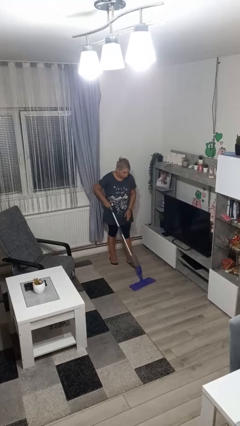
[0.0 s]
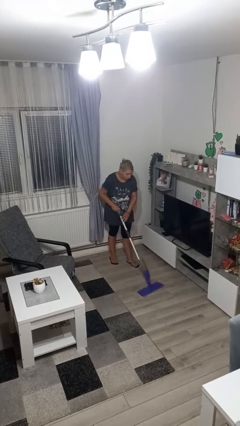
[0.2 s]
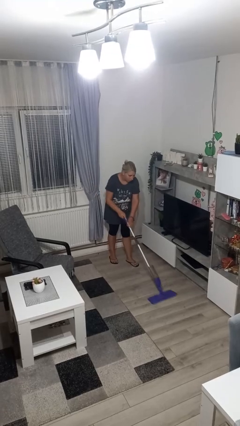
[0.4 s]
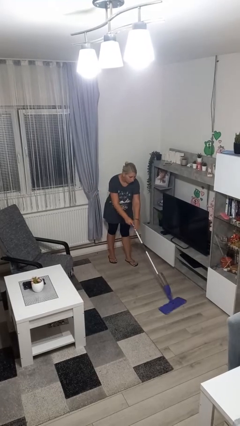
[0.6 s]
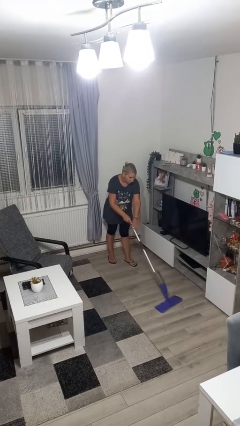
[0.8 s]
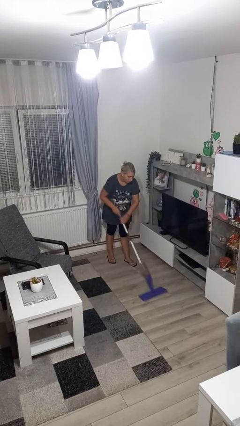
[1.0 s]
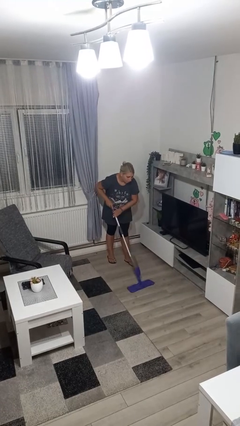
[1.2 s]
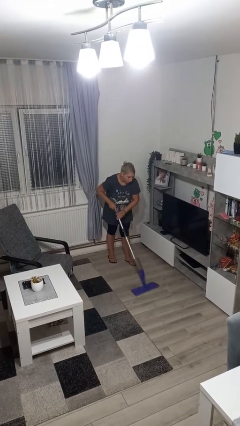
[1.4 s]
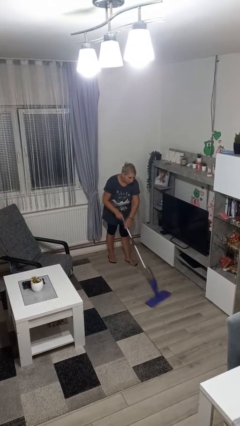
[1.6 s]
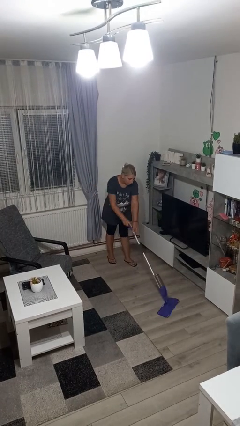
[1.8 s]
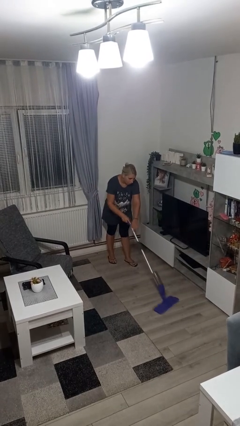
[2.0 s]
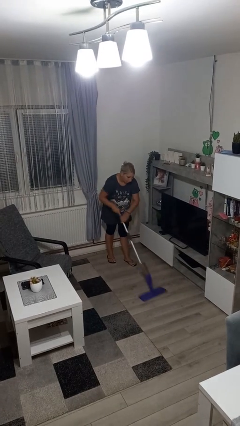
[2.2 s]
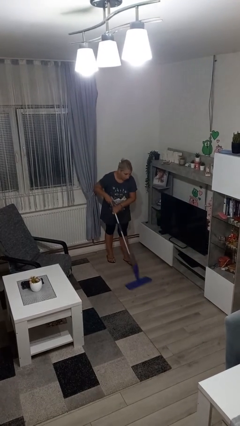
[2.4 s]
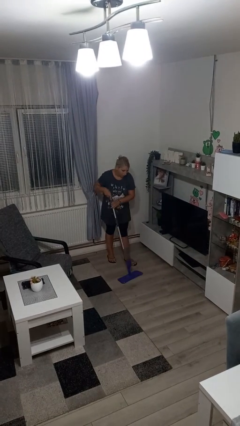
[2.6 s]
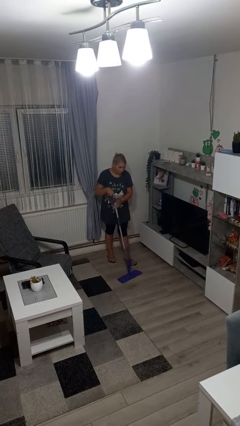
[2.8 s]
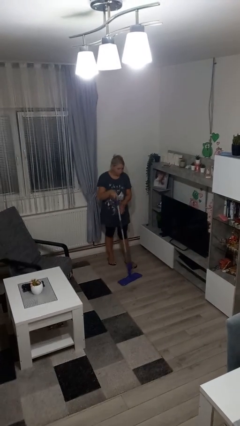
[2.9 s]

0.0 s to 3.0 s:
person mops

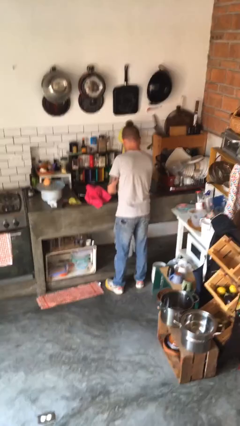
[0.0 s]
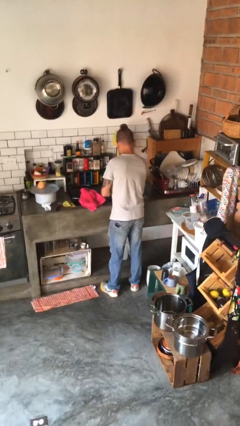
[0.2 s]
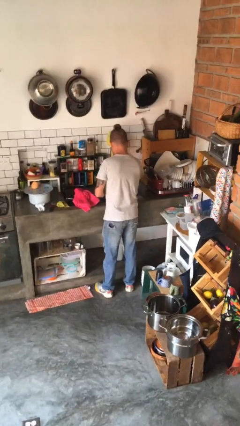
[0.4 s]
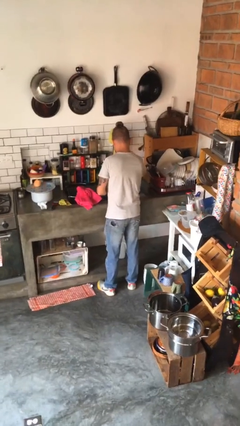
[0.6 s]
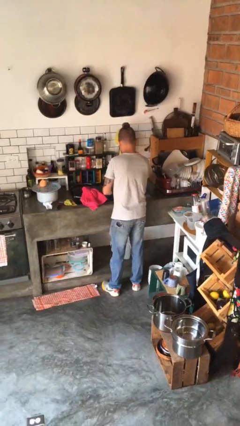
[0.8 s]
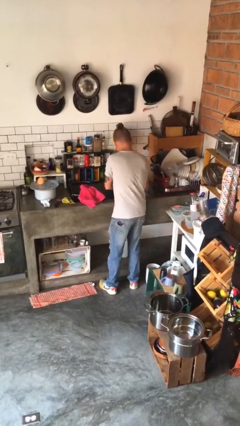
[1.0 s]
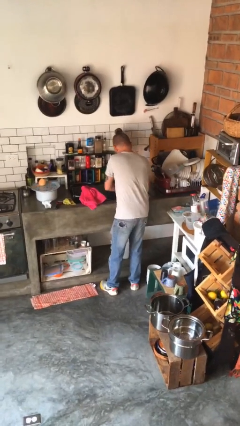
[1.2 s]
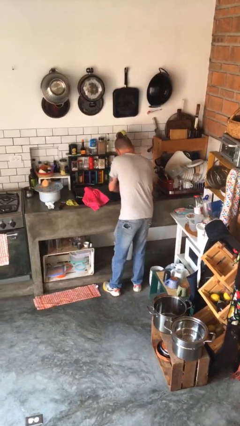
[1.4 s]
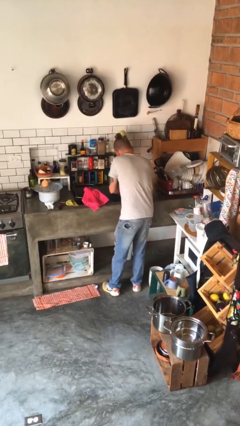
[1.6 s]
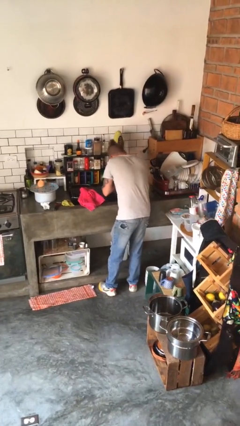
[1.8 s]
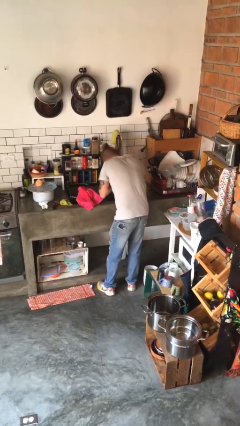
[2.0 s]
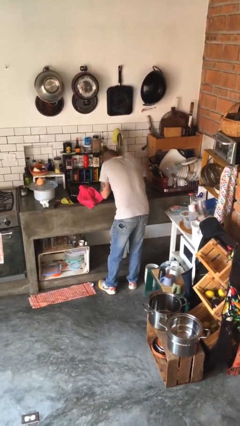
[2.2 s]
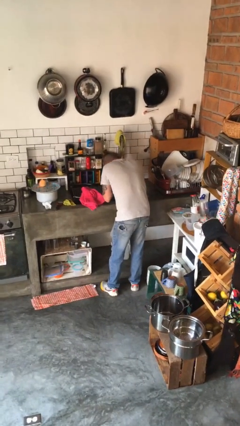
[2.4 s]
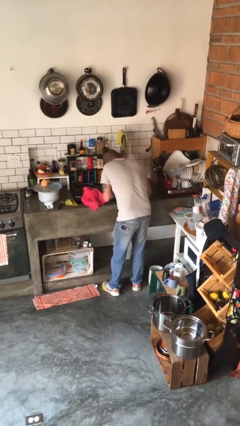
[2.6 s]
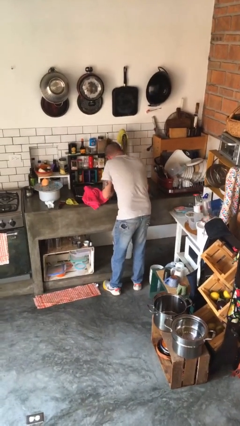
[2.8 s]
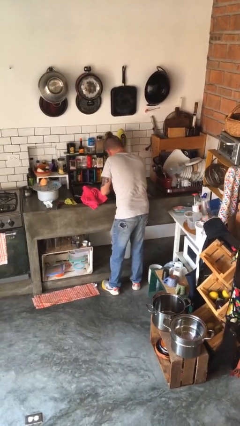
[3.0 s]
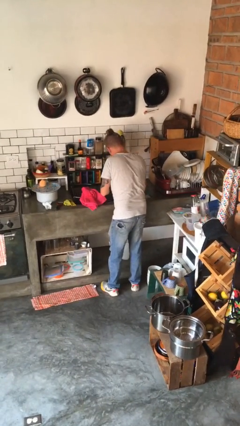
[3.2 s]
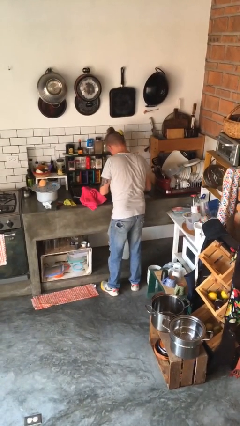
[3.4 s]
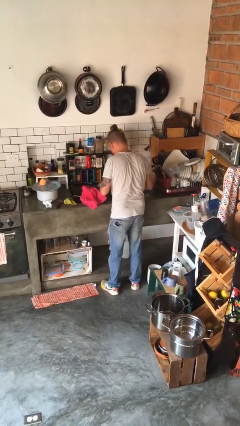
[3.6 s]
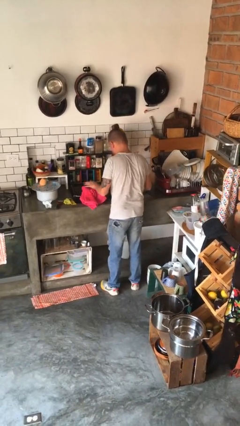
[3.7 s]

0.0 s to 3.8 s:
person washes face

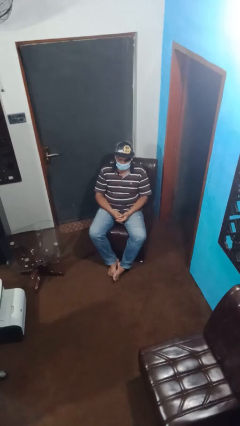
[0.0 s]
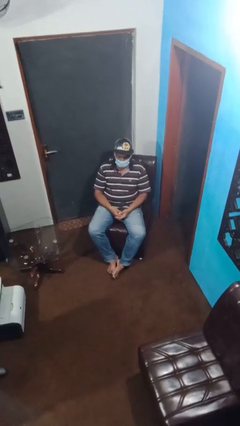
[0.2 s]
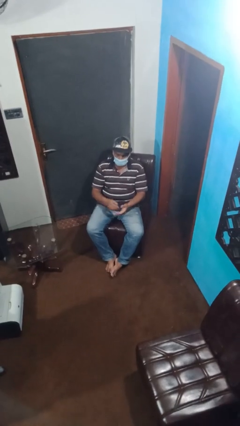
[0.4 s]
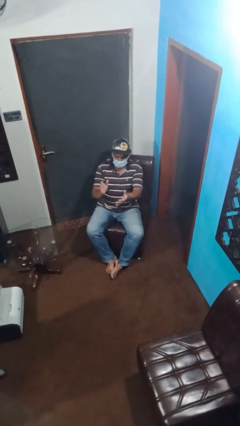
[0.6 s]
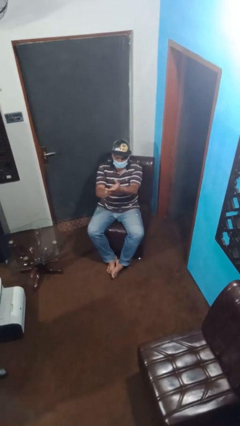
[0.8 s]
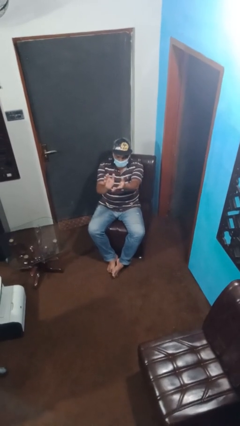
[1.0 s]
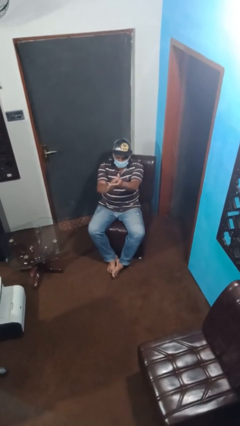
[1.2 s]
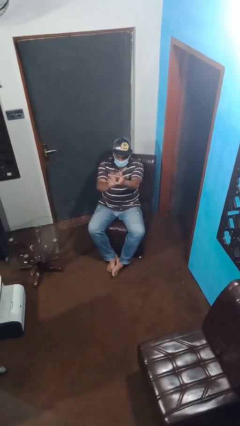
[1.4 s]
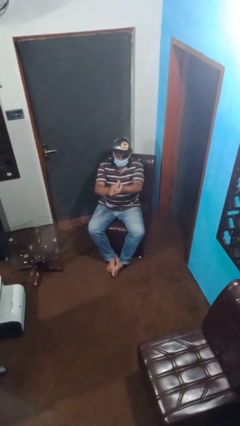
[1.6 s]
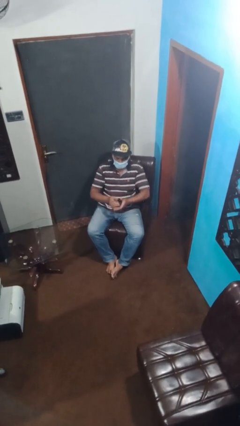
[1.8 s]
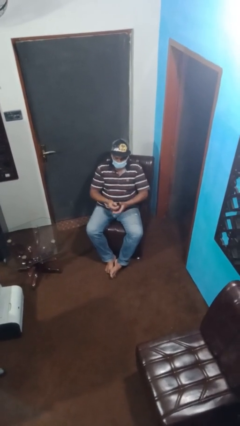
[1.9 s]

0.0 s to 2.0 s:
person claps hands

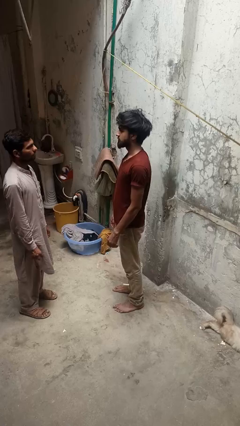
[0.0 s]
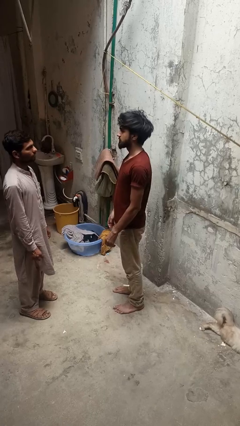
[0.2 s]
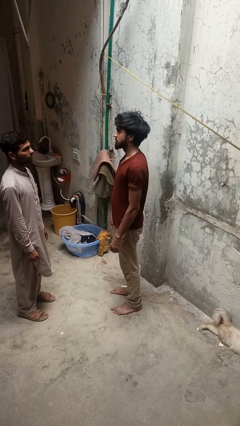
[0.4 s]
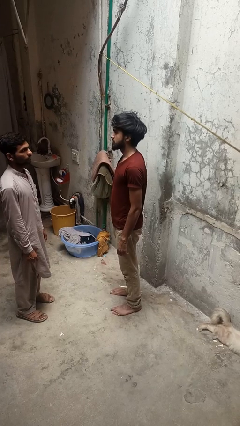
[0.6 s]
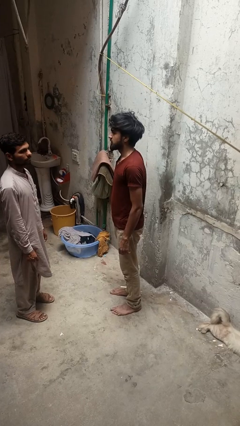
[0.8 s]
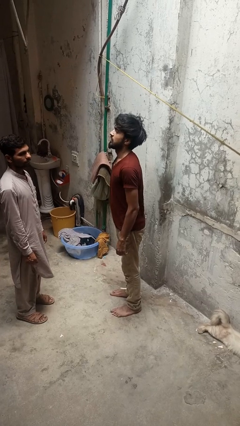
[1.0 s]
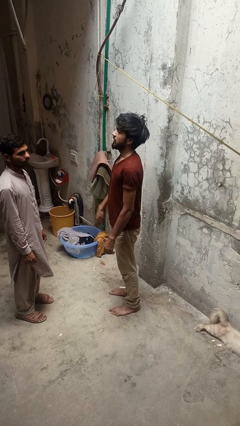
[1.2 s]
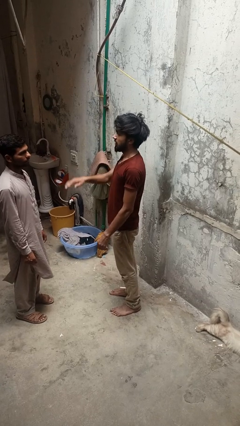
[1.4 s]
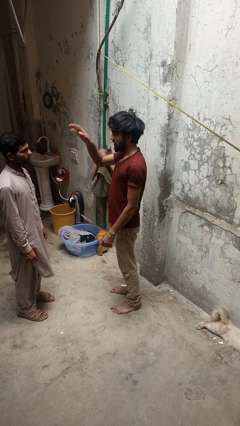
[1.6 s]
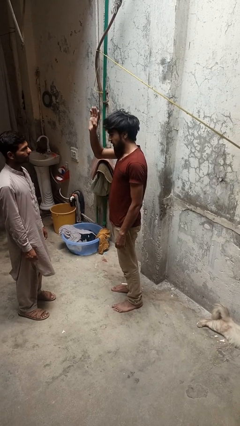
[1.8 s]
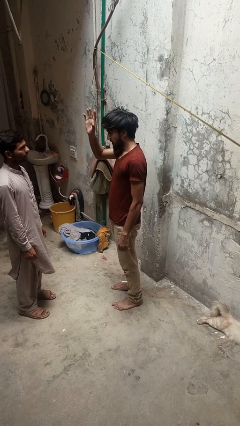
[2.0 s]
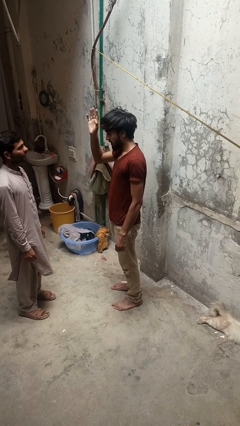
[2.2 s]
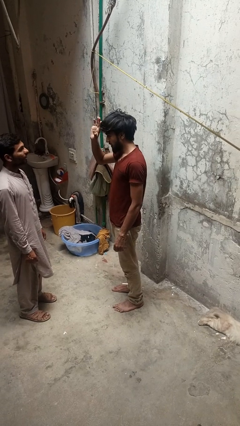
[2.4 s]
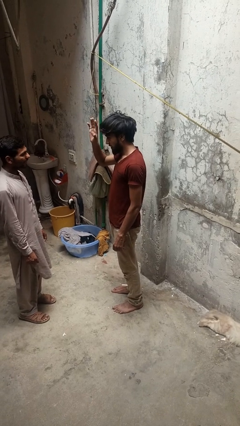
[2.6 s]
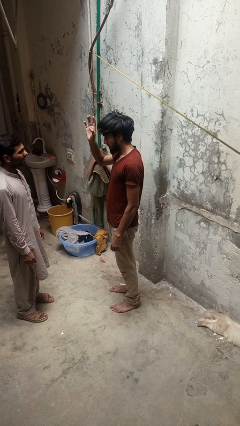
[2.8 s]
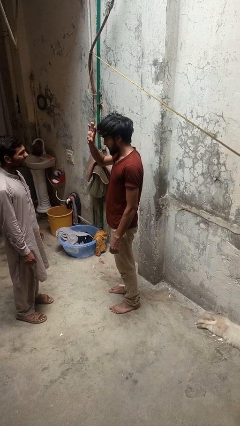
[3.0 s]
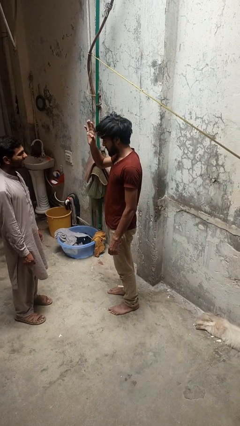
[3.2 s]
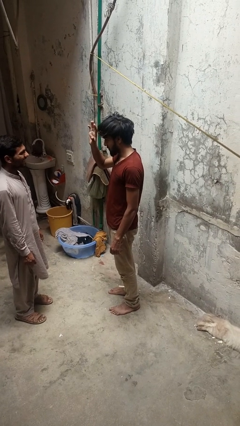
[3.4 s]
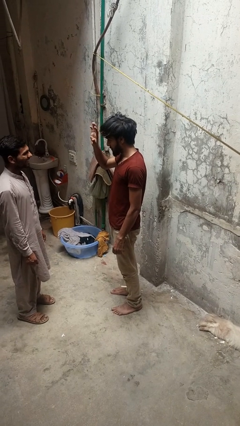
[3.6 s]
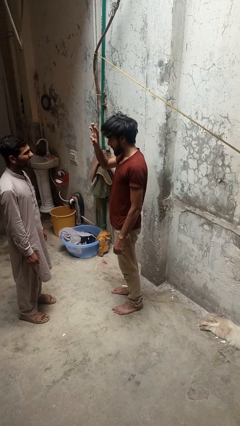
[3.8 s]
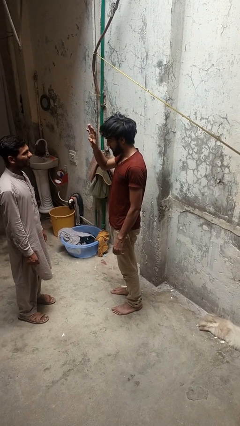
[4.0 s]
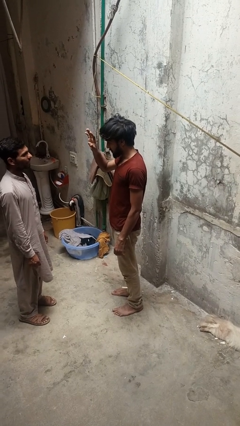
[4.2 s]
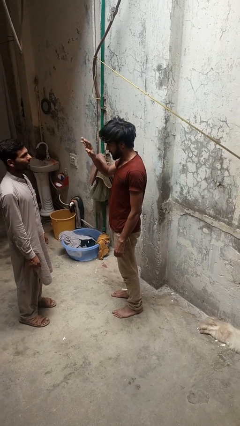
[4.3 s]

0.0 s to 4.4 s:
person waves at person

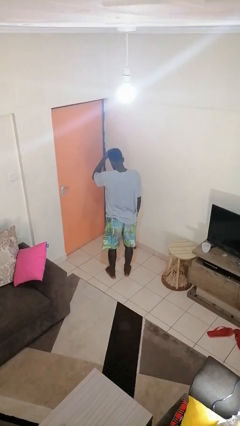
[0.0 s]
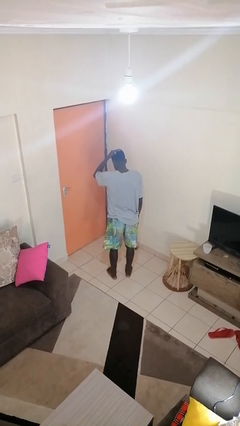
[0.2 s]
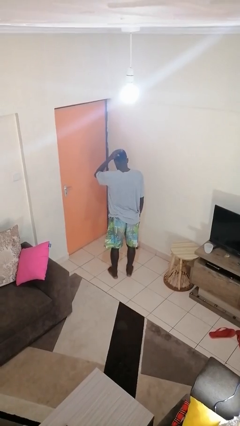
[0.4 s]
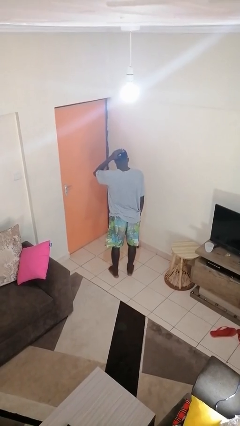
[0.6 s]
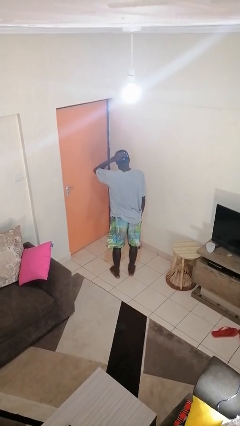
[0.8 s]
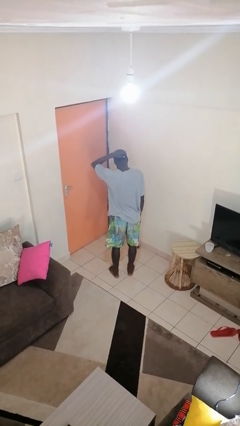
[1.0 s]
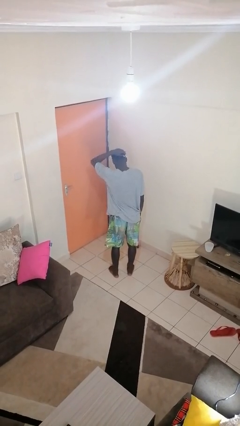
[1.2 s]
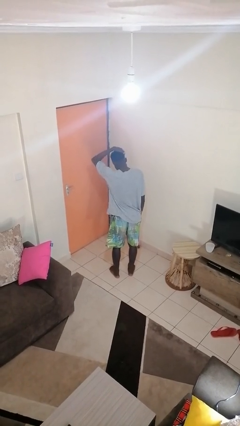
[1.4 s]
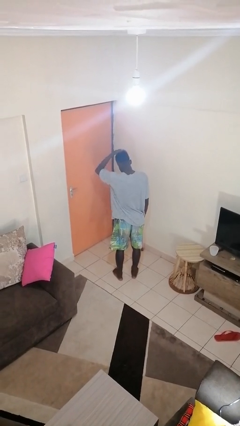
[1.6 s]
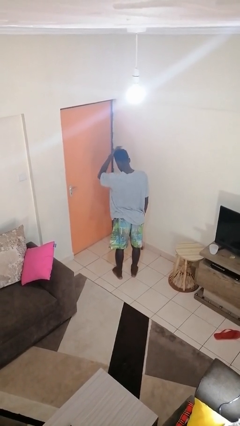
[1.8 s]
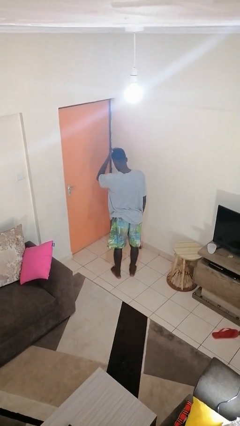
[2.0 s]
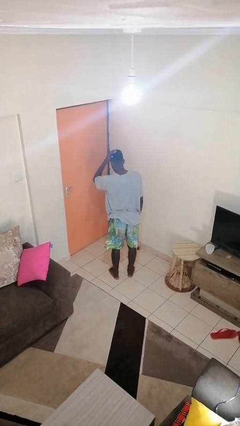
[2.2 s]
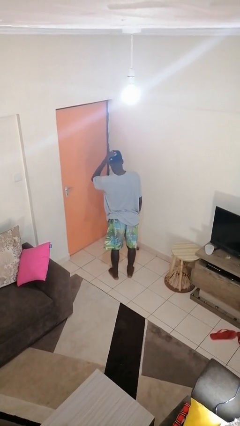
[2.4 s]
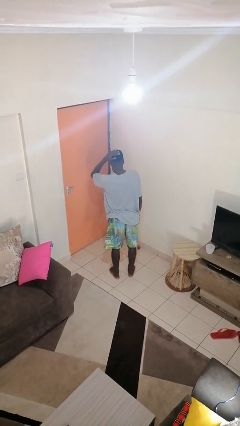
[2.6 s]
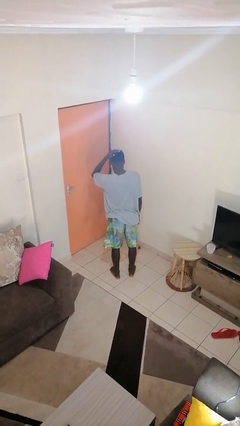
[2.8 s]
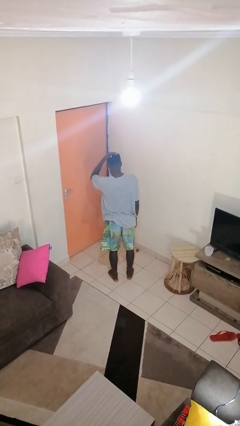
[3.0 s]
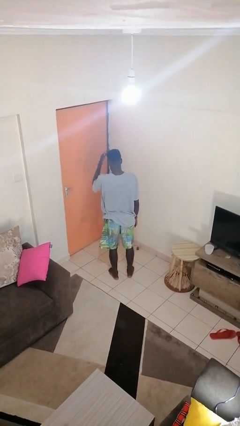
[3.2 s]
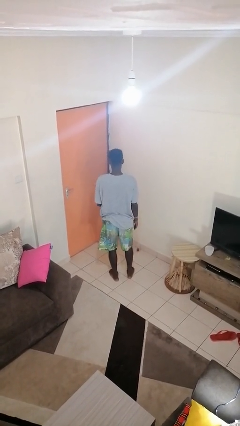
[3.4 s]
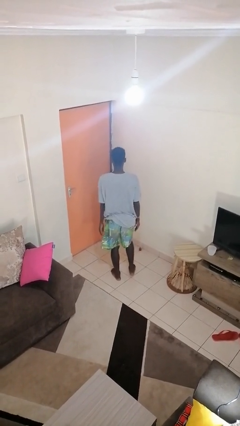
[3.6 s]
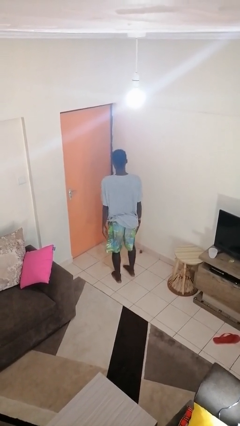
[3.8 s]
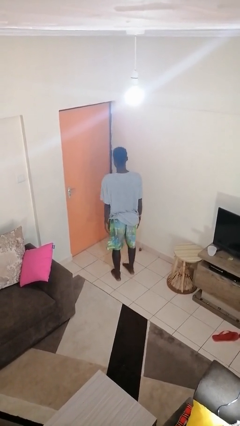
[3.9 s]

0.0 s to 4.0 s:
person pats head

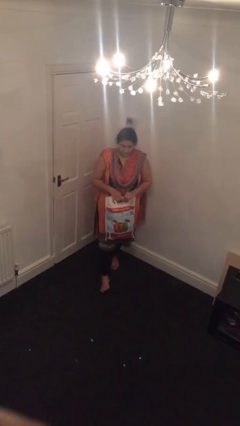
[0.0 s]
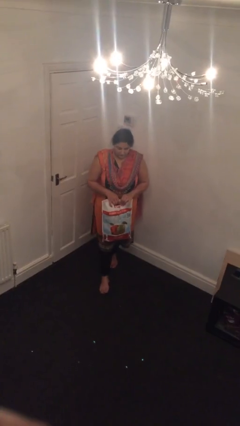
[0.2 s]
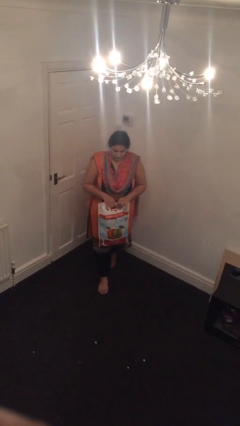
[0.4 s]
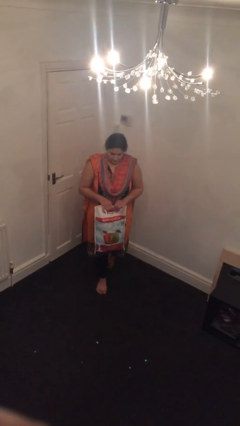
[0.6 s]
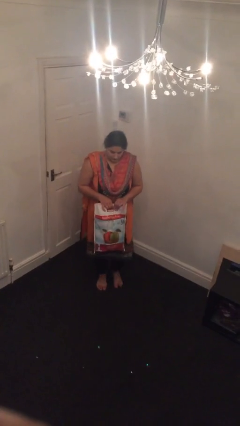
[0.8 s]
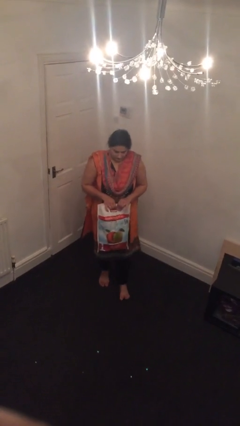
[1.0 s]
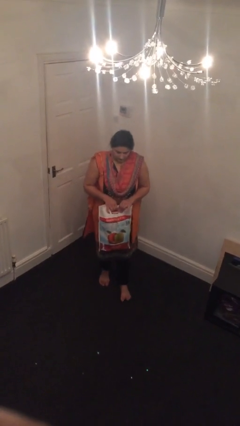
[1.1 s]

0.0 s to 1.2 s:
person carries heavy object
